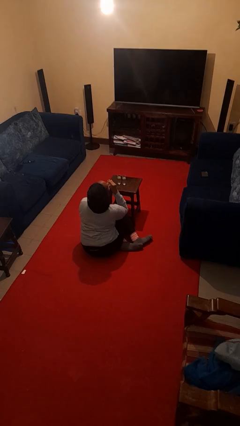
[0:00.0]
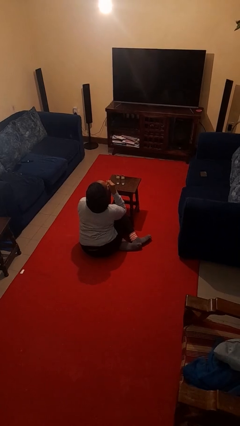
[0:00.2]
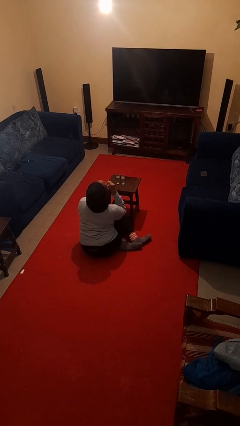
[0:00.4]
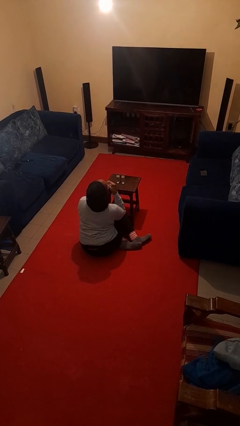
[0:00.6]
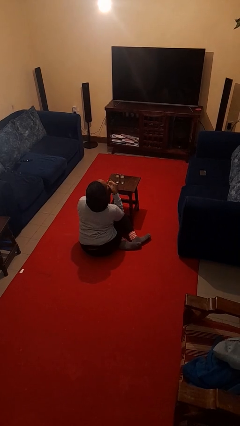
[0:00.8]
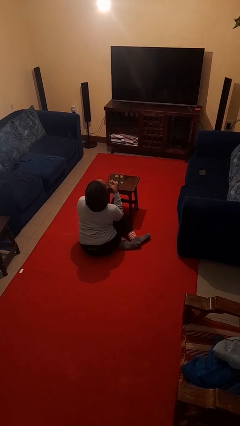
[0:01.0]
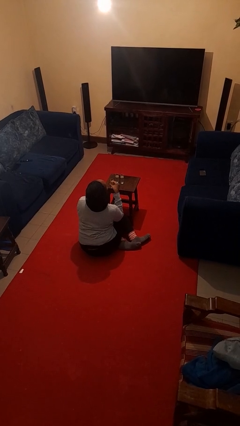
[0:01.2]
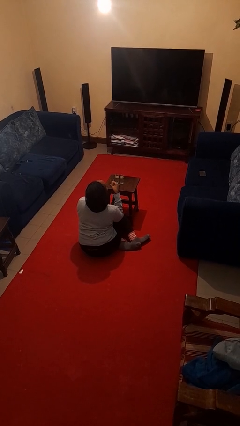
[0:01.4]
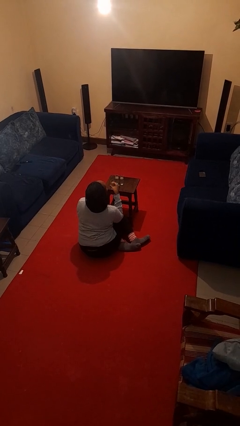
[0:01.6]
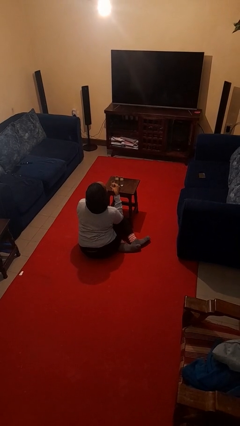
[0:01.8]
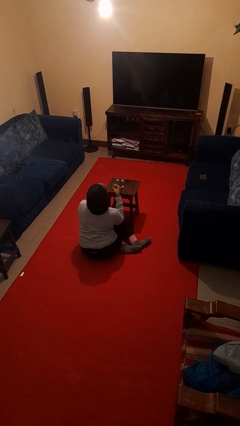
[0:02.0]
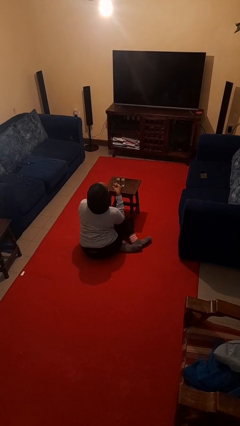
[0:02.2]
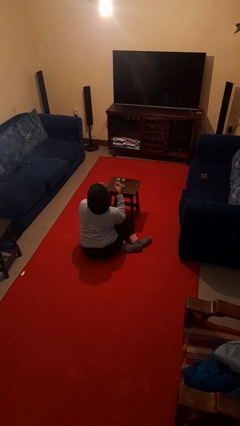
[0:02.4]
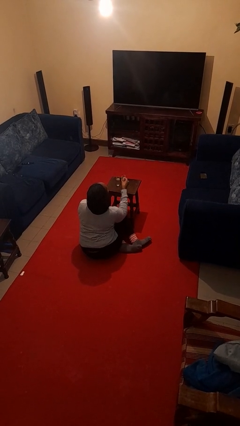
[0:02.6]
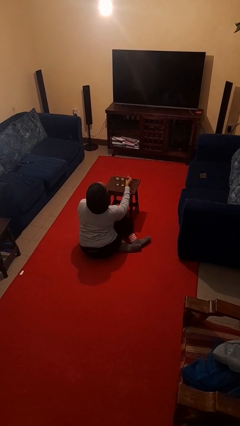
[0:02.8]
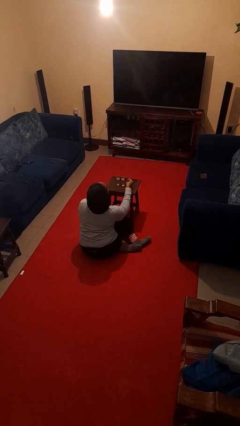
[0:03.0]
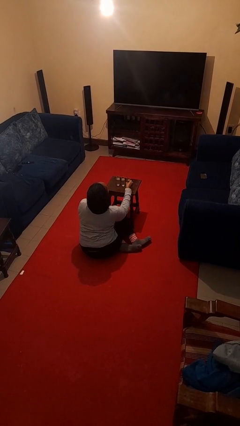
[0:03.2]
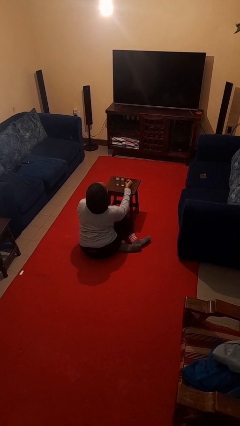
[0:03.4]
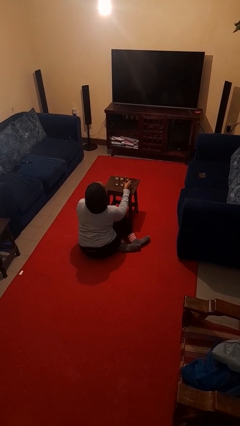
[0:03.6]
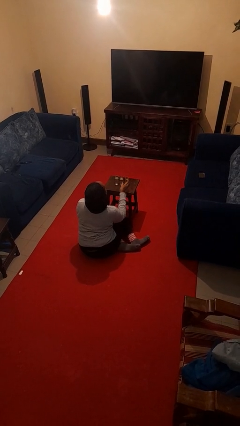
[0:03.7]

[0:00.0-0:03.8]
person puts down object on table

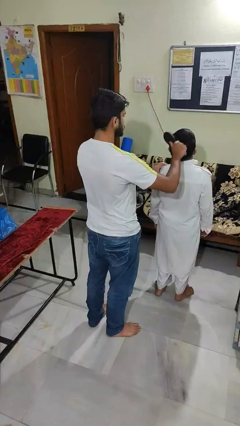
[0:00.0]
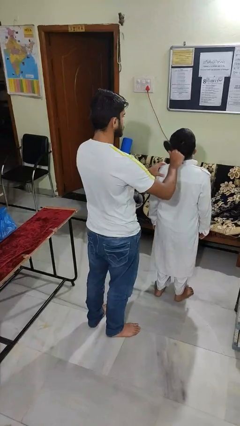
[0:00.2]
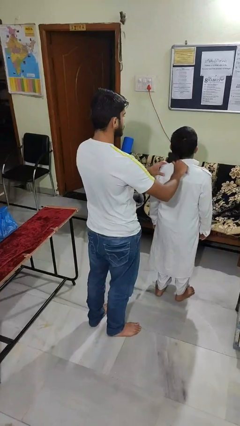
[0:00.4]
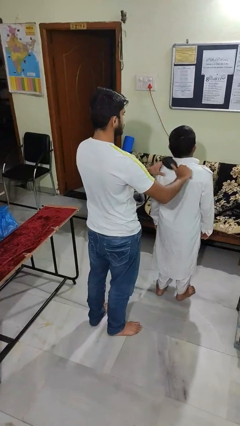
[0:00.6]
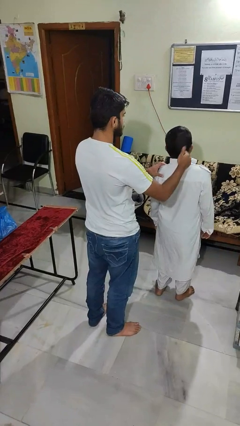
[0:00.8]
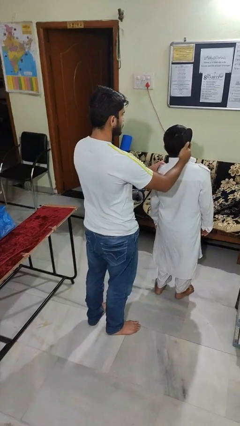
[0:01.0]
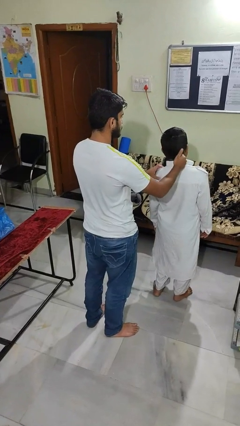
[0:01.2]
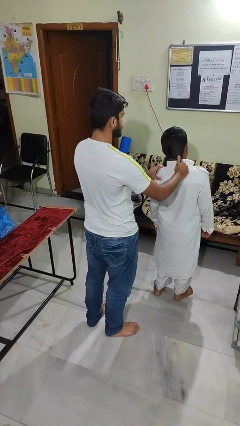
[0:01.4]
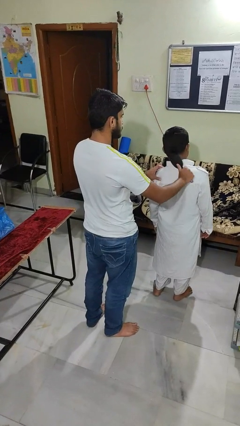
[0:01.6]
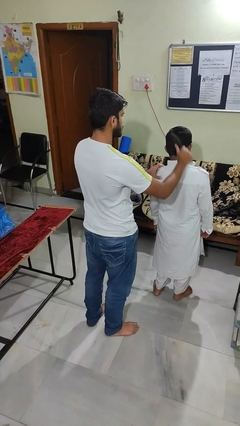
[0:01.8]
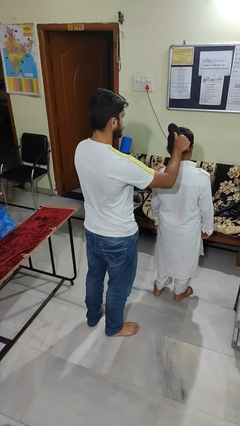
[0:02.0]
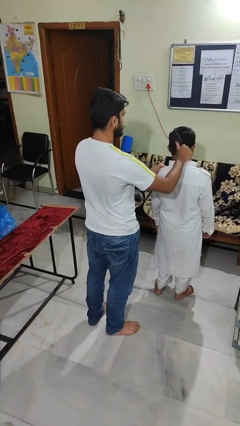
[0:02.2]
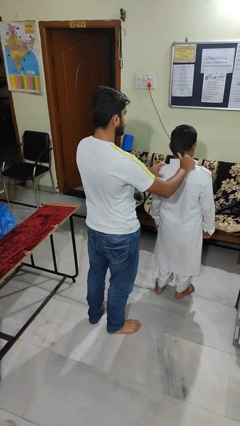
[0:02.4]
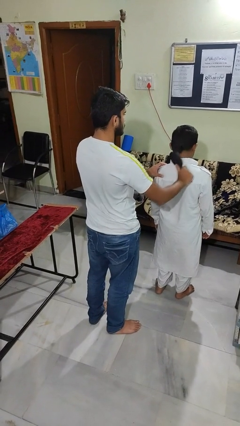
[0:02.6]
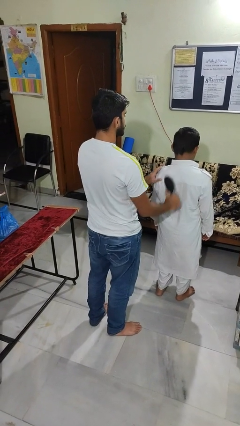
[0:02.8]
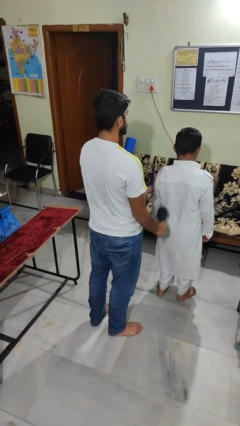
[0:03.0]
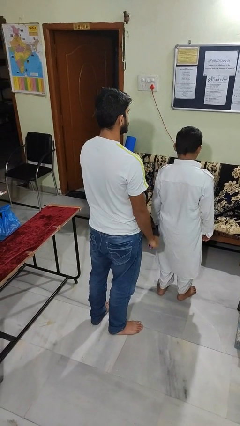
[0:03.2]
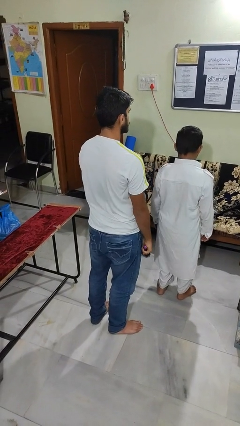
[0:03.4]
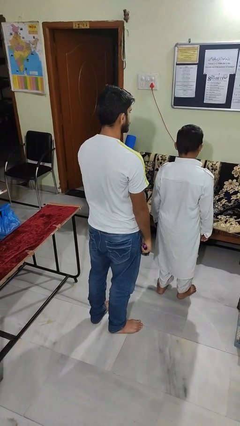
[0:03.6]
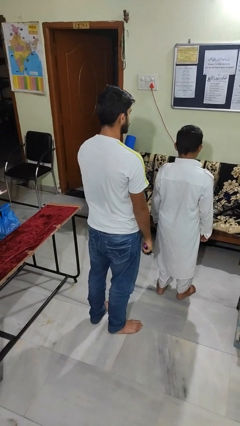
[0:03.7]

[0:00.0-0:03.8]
person brushes hair of person

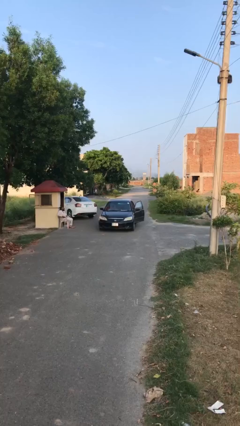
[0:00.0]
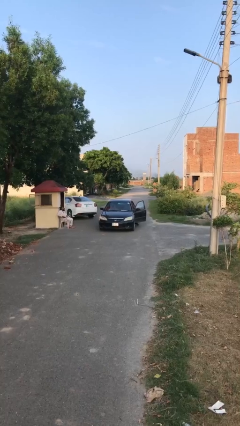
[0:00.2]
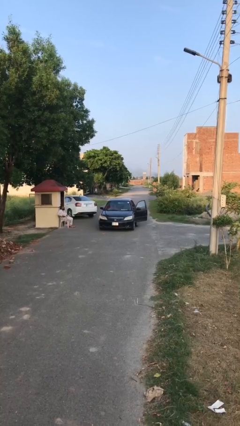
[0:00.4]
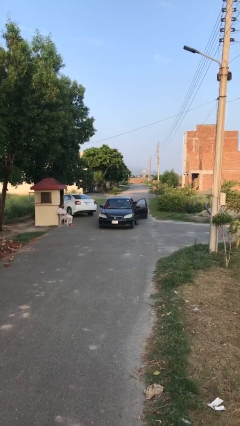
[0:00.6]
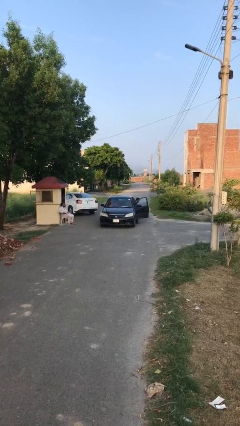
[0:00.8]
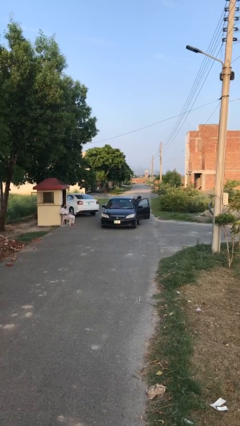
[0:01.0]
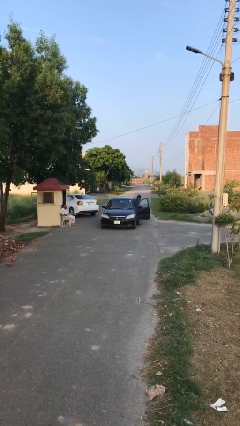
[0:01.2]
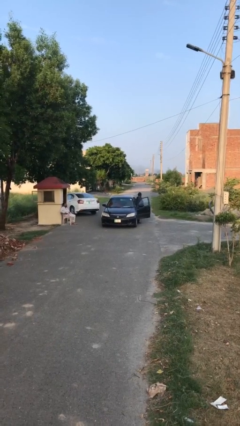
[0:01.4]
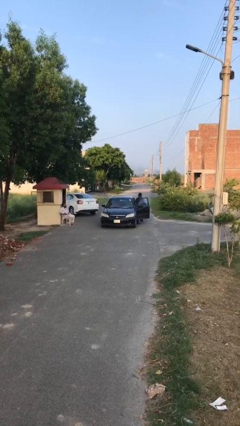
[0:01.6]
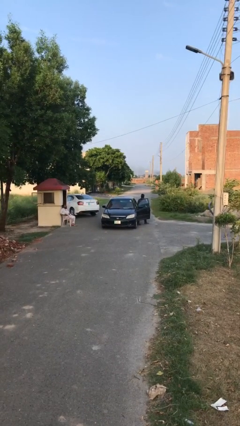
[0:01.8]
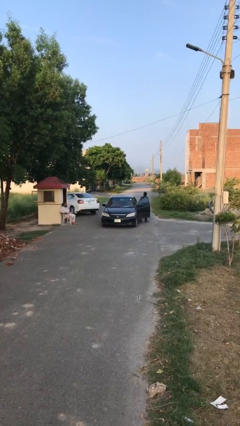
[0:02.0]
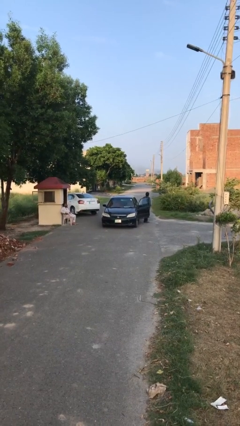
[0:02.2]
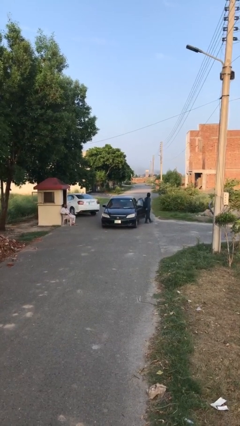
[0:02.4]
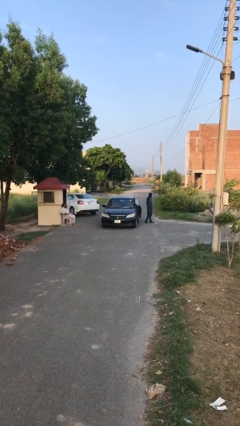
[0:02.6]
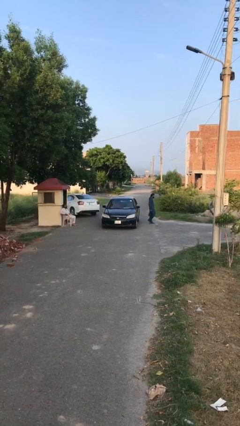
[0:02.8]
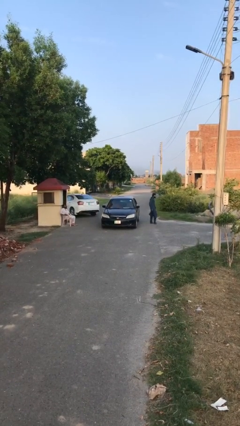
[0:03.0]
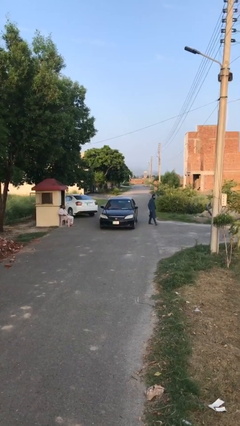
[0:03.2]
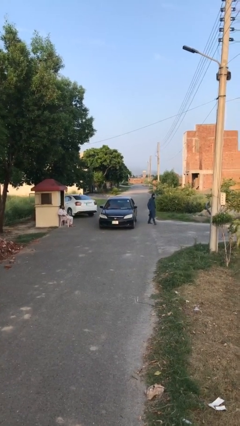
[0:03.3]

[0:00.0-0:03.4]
car drops off person

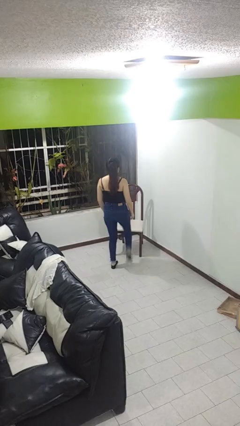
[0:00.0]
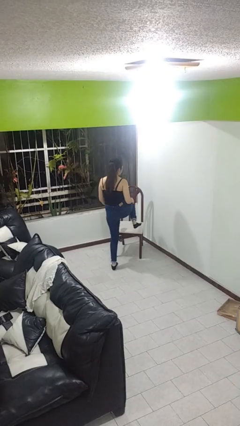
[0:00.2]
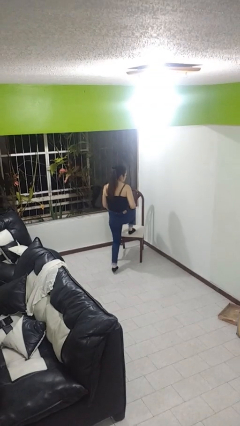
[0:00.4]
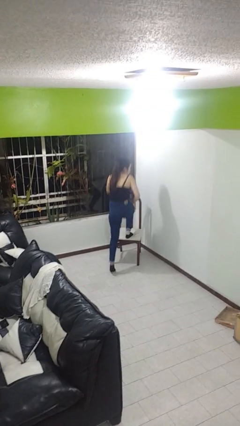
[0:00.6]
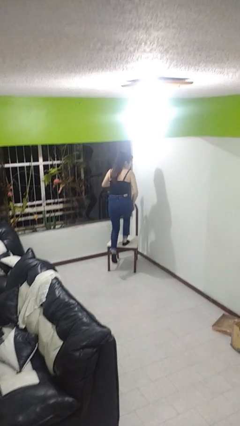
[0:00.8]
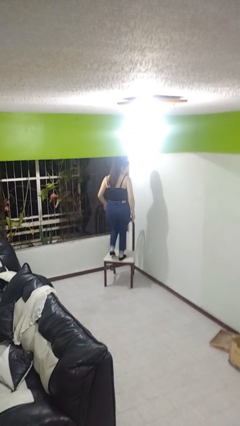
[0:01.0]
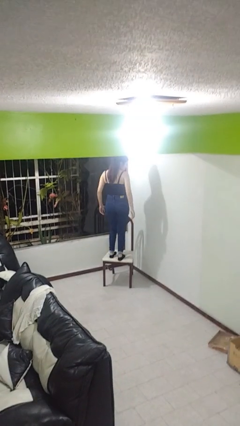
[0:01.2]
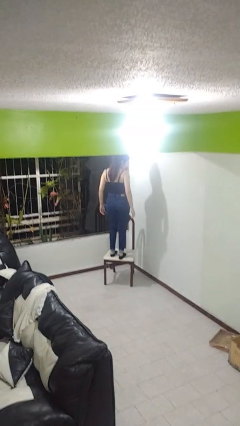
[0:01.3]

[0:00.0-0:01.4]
person climbs on chair

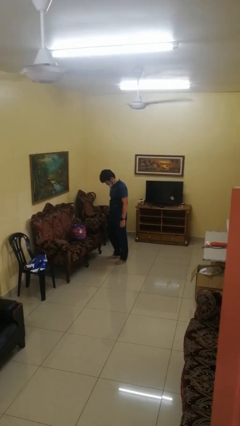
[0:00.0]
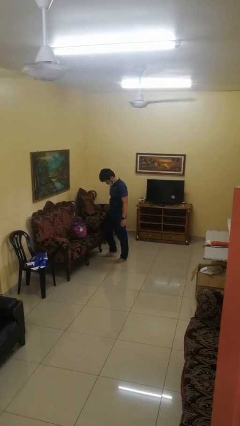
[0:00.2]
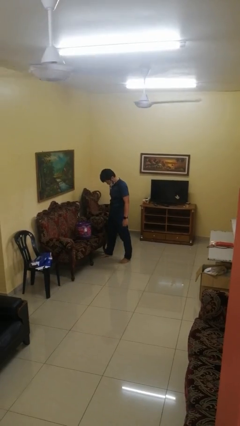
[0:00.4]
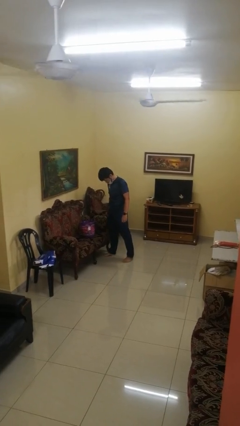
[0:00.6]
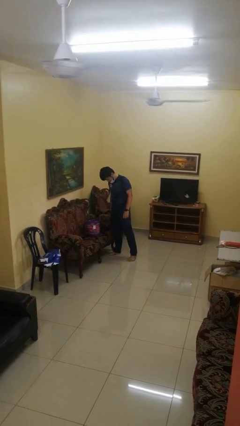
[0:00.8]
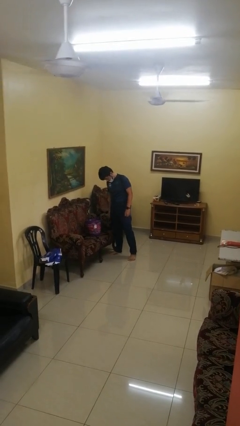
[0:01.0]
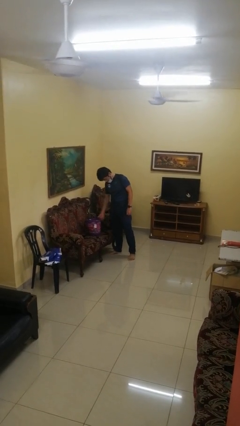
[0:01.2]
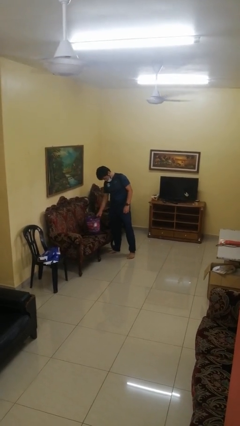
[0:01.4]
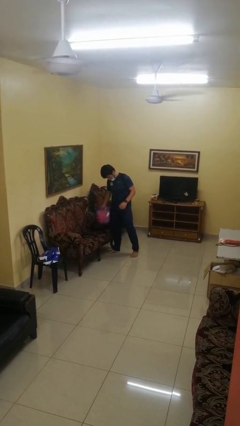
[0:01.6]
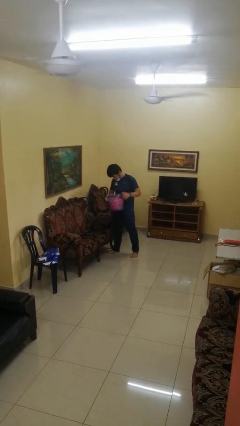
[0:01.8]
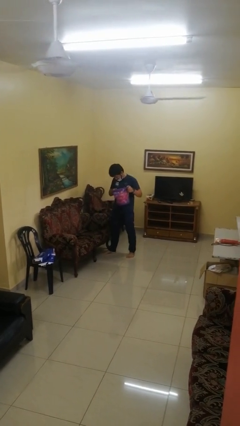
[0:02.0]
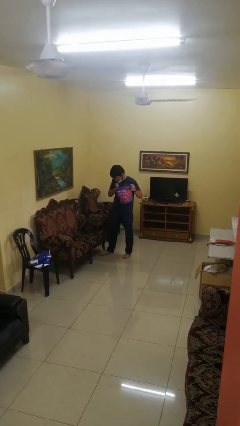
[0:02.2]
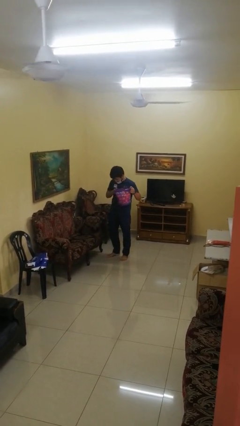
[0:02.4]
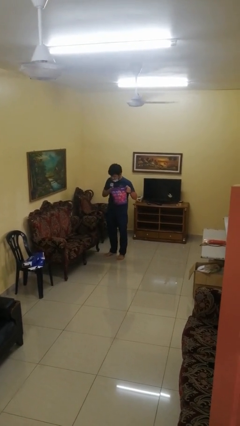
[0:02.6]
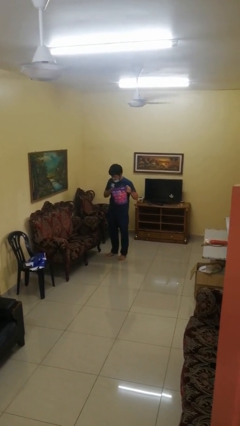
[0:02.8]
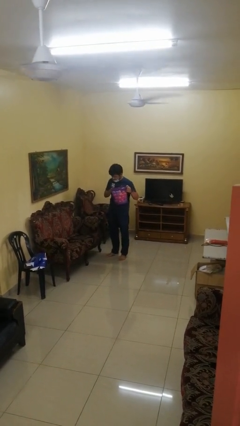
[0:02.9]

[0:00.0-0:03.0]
person picks up object from couch

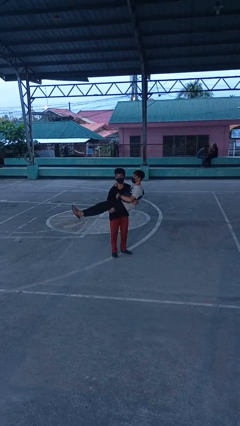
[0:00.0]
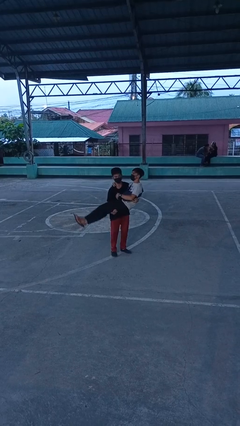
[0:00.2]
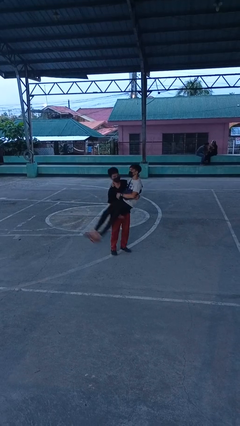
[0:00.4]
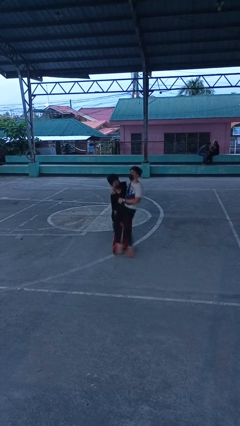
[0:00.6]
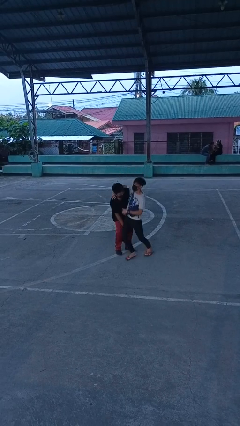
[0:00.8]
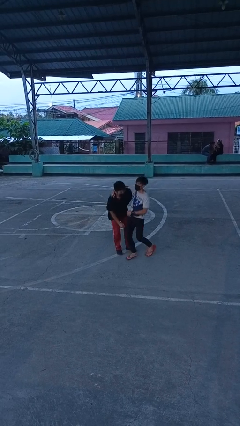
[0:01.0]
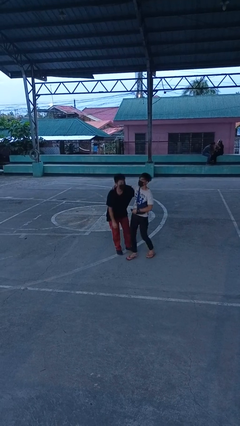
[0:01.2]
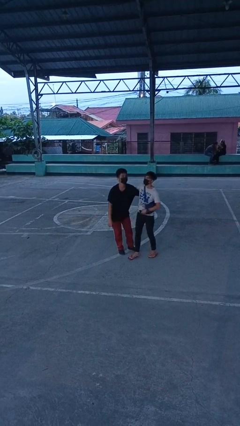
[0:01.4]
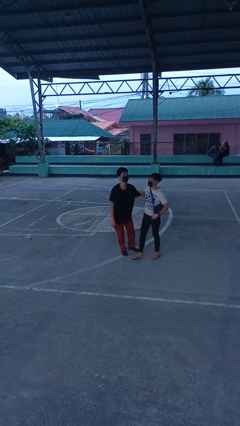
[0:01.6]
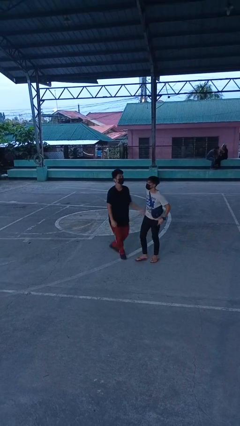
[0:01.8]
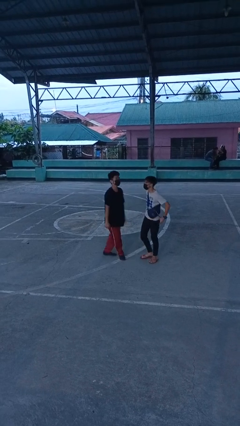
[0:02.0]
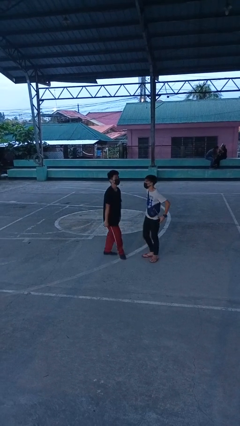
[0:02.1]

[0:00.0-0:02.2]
person puts down person
